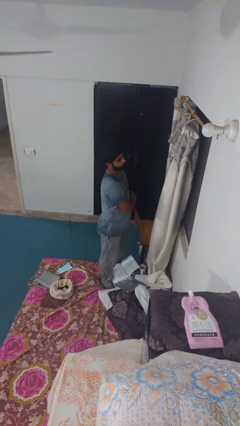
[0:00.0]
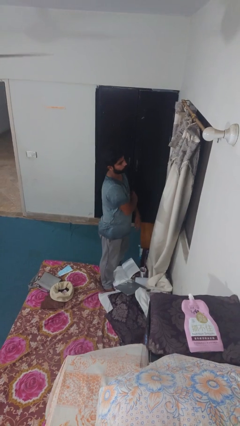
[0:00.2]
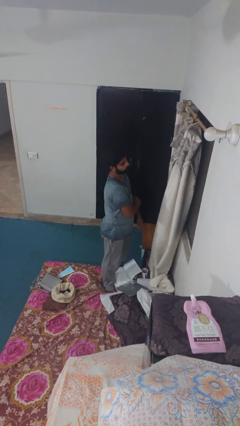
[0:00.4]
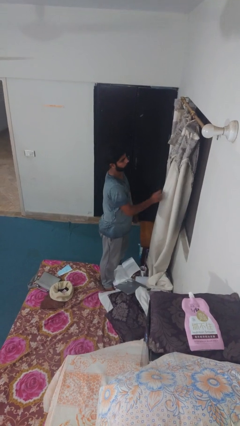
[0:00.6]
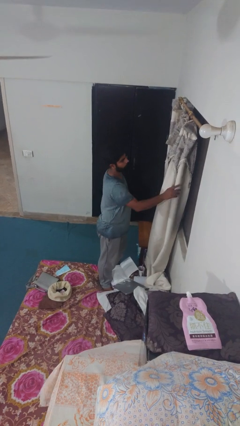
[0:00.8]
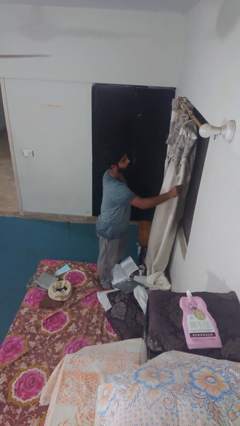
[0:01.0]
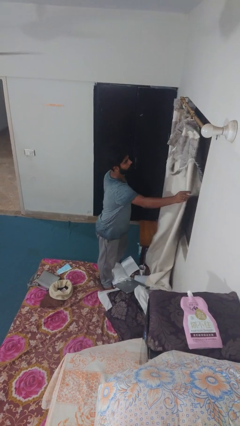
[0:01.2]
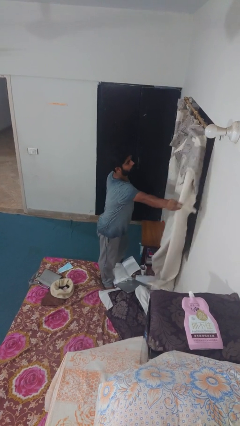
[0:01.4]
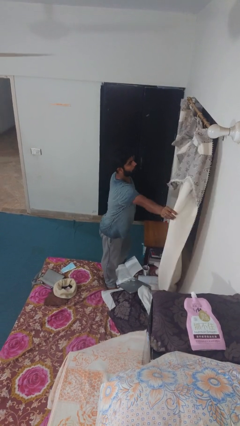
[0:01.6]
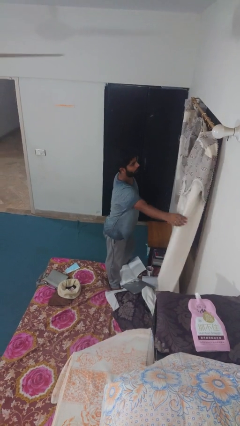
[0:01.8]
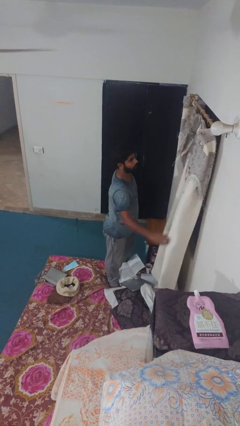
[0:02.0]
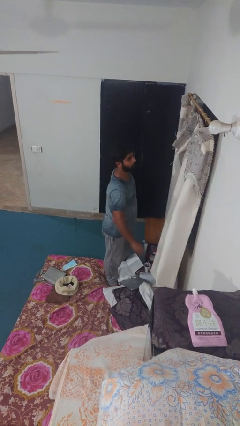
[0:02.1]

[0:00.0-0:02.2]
person closes curtains

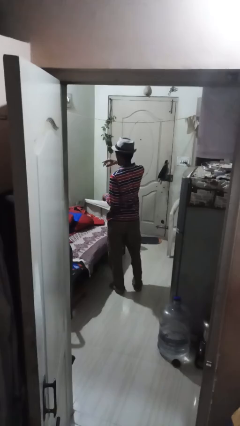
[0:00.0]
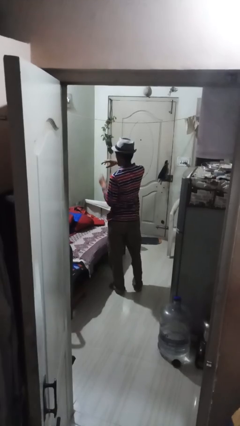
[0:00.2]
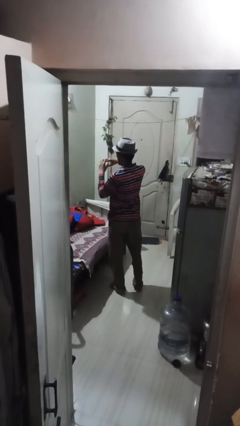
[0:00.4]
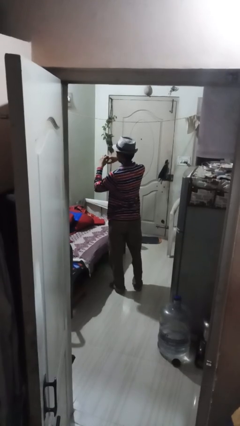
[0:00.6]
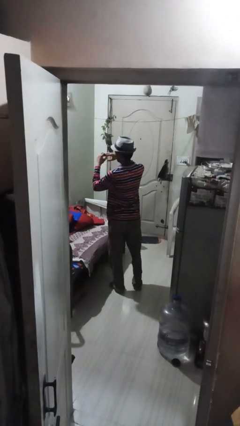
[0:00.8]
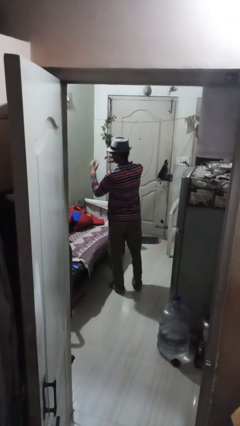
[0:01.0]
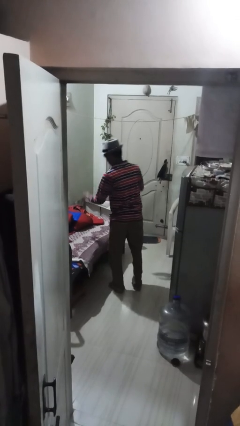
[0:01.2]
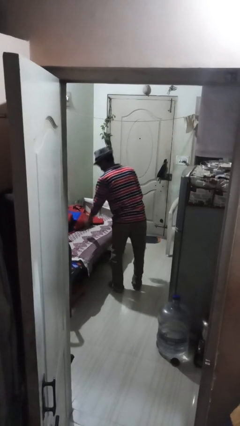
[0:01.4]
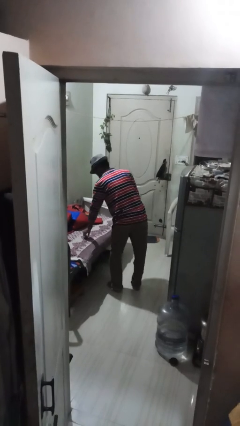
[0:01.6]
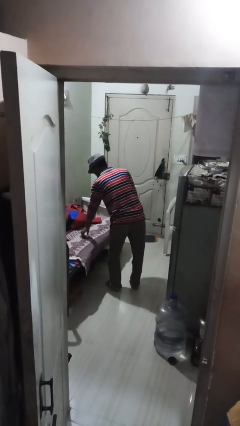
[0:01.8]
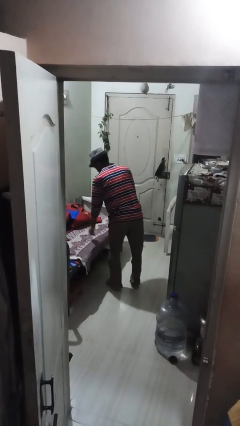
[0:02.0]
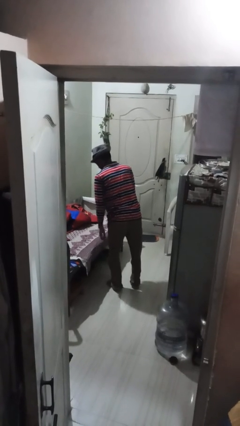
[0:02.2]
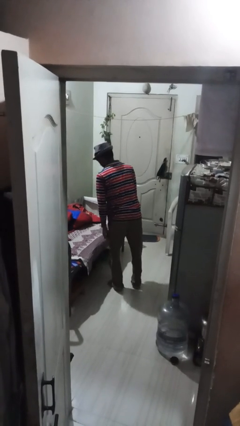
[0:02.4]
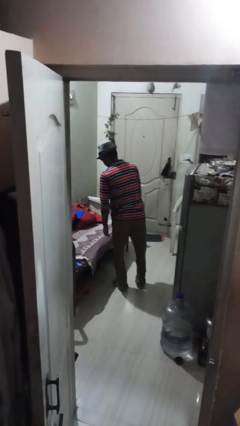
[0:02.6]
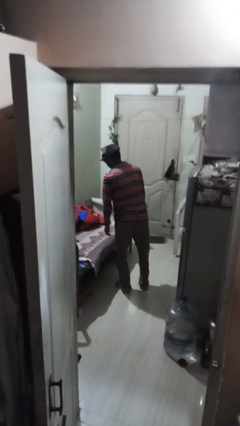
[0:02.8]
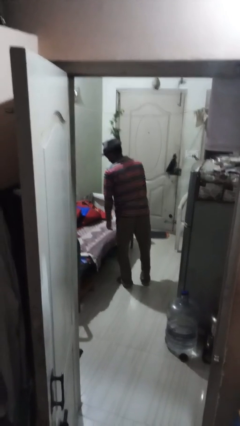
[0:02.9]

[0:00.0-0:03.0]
person takes off ring

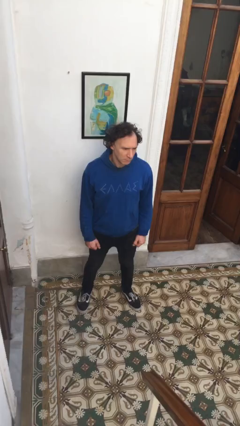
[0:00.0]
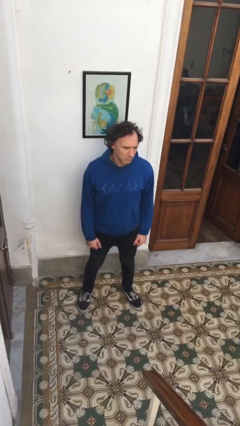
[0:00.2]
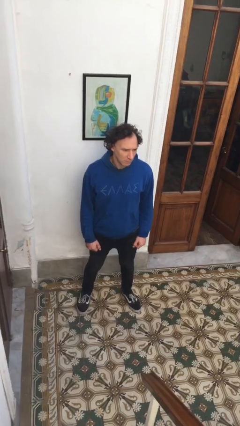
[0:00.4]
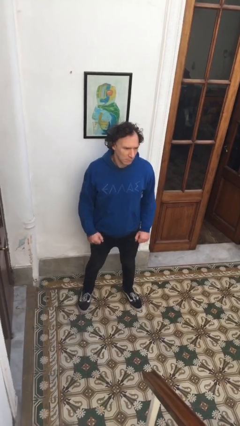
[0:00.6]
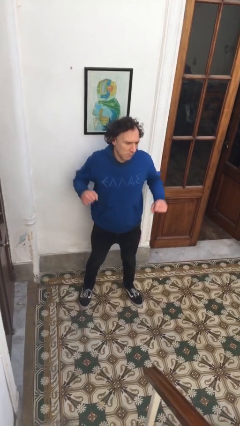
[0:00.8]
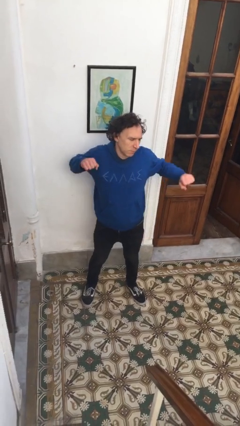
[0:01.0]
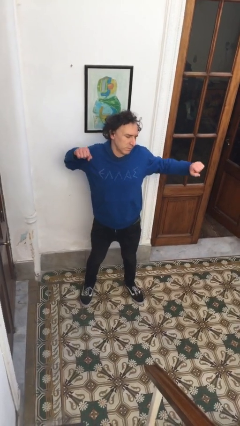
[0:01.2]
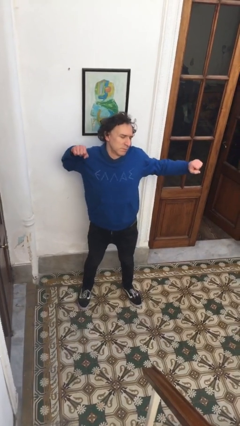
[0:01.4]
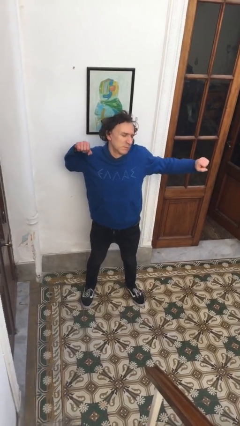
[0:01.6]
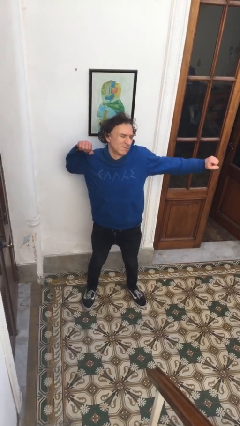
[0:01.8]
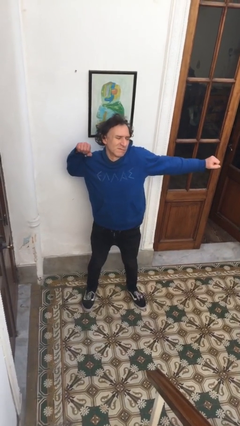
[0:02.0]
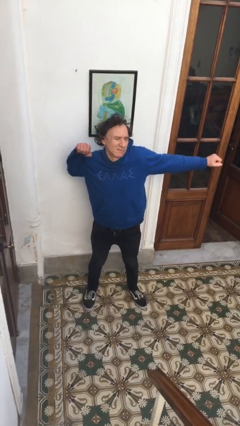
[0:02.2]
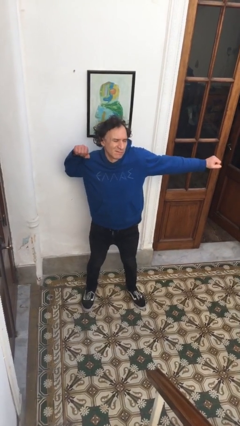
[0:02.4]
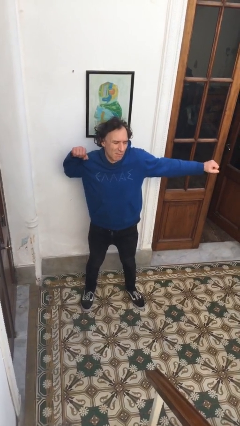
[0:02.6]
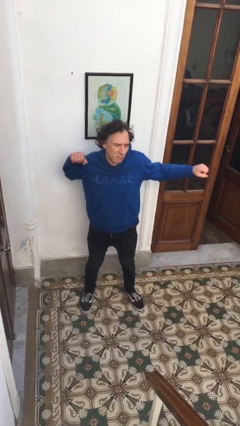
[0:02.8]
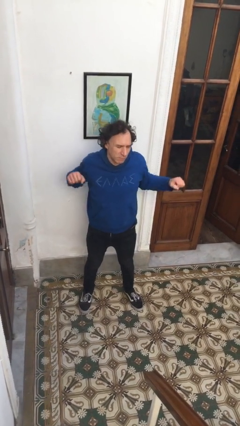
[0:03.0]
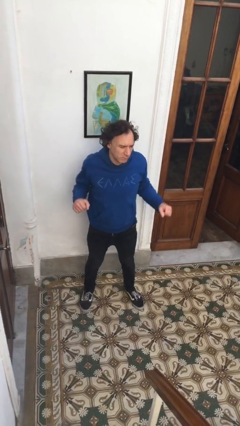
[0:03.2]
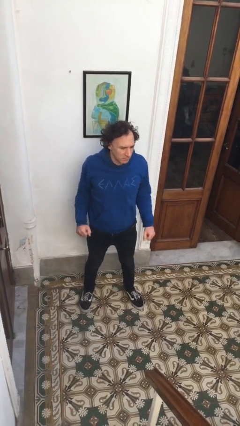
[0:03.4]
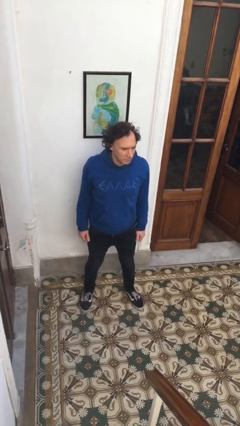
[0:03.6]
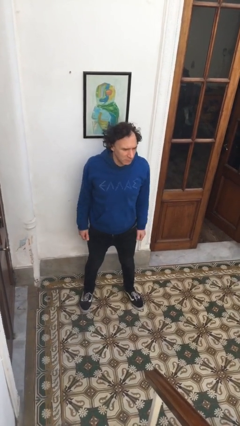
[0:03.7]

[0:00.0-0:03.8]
person stretches arms to side

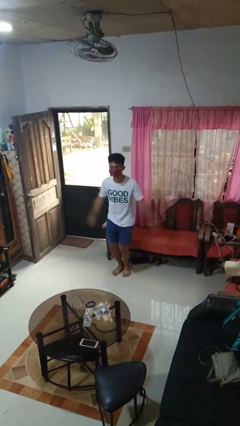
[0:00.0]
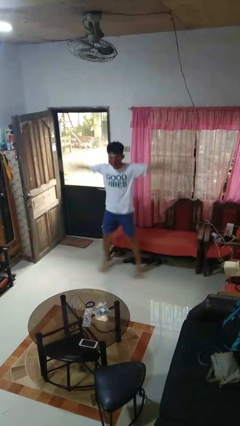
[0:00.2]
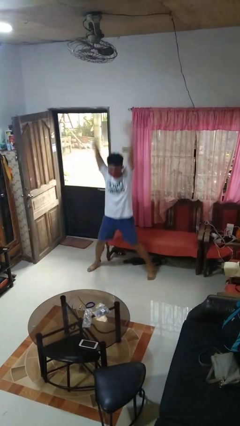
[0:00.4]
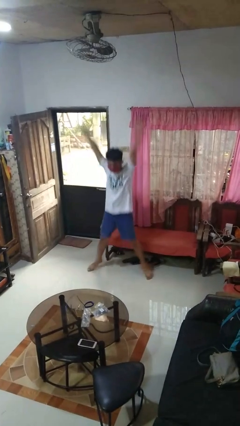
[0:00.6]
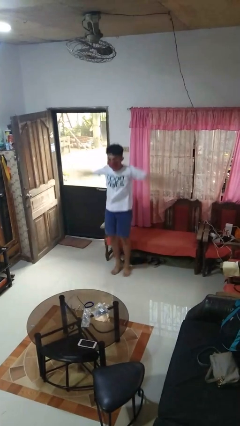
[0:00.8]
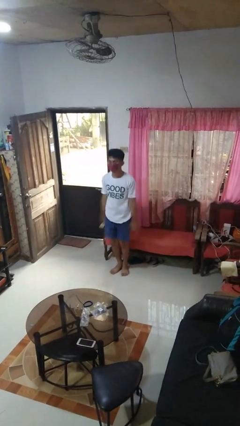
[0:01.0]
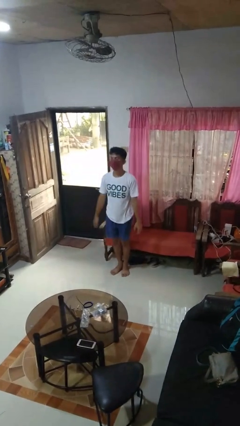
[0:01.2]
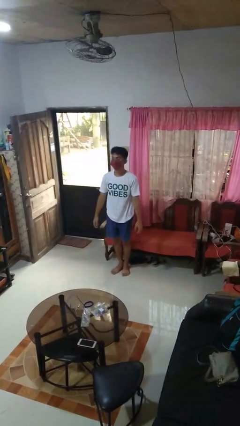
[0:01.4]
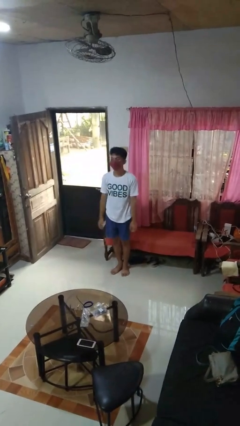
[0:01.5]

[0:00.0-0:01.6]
person exercises with jumping jacks

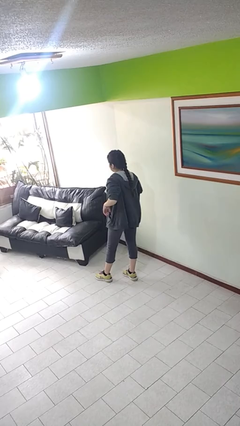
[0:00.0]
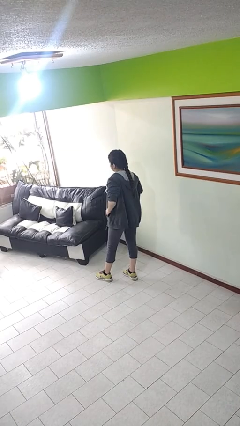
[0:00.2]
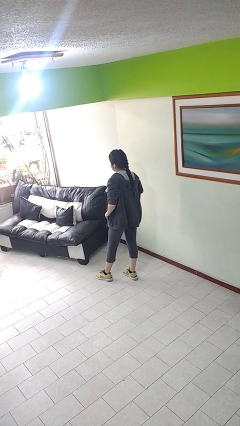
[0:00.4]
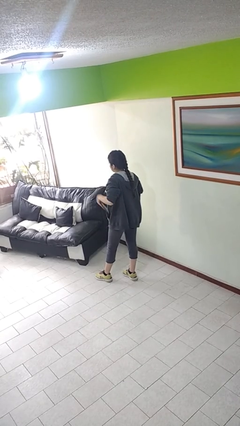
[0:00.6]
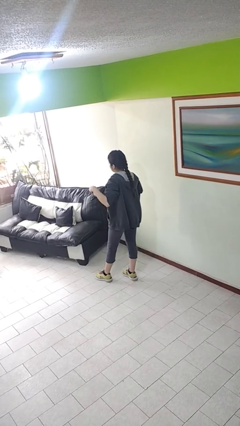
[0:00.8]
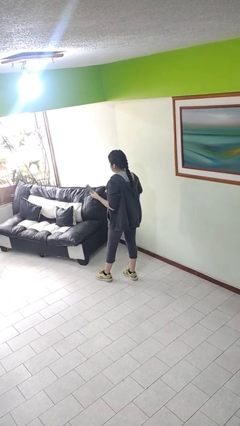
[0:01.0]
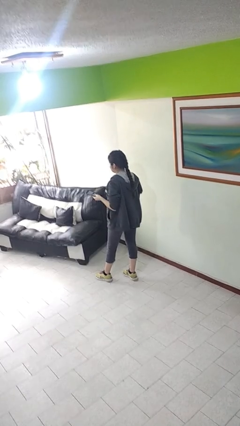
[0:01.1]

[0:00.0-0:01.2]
person takes phone from pocket

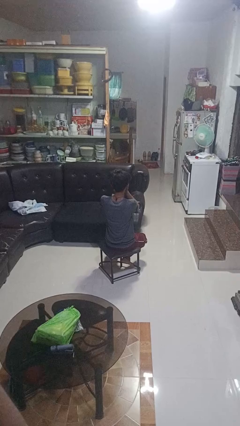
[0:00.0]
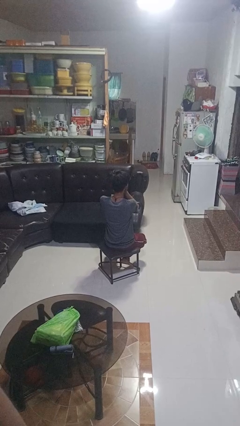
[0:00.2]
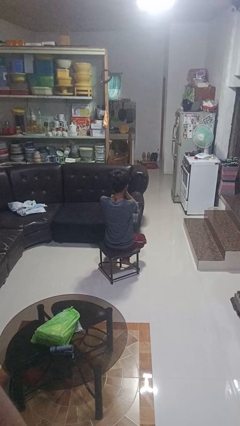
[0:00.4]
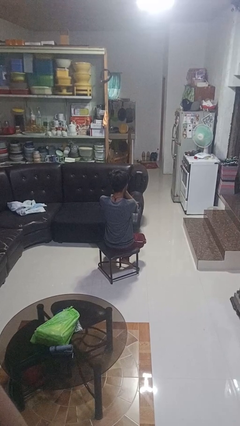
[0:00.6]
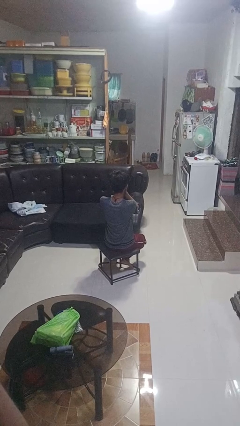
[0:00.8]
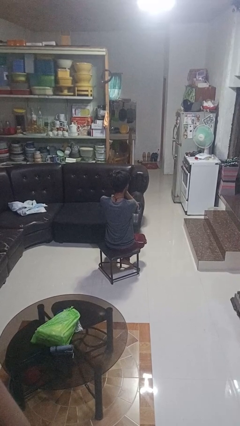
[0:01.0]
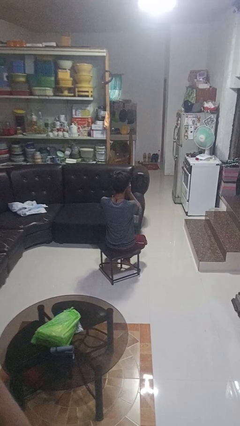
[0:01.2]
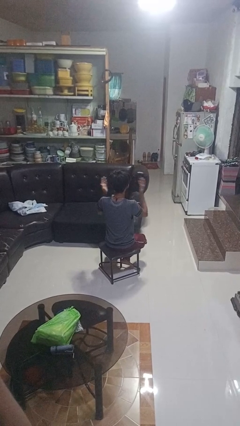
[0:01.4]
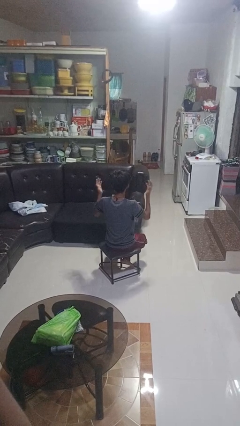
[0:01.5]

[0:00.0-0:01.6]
person covers face with hands

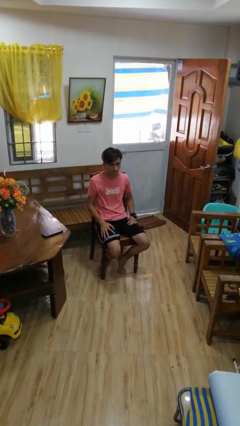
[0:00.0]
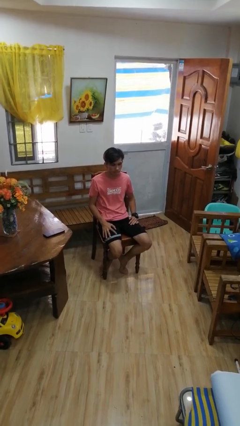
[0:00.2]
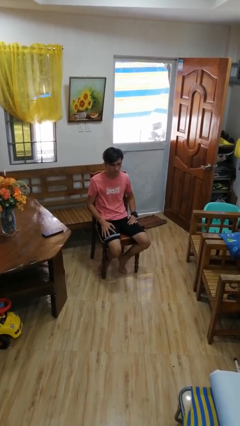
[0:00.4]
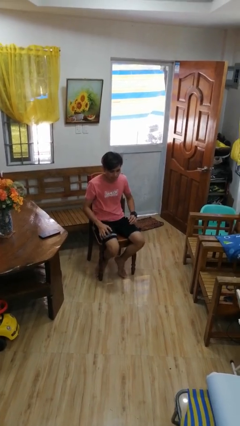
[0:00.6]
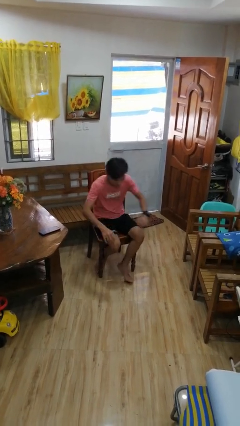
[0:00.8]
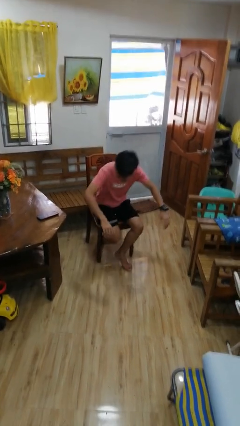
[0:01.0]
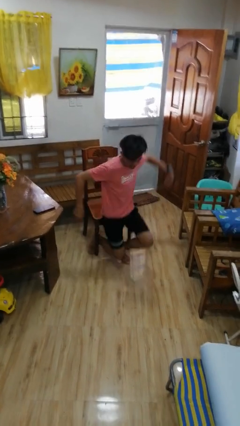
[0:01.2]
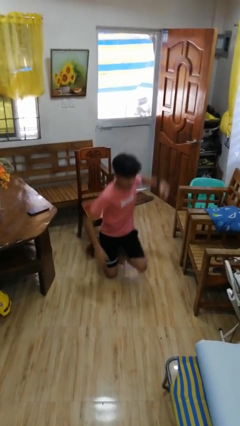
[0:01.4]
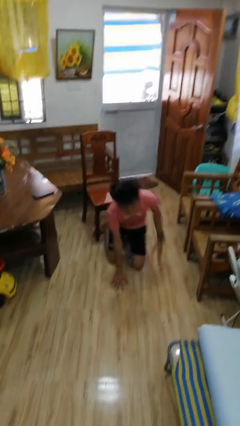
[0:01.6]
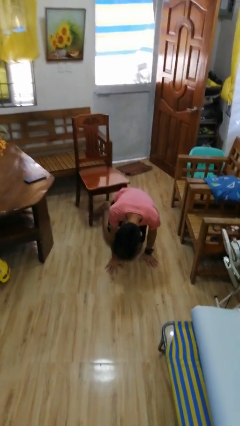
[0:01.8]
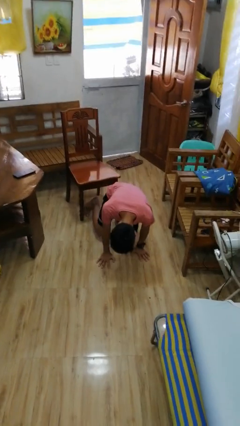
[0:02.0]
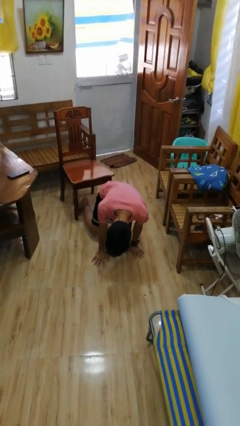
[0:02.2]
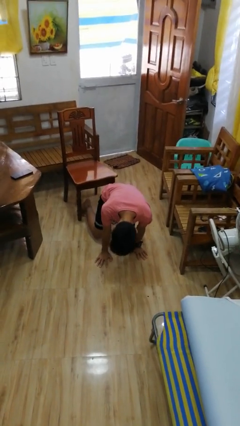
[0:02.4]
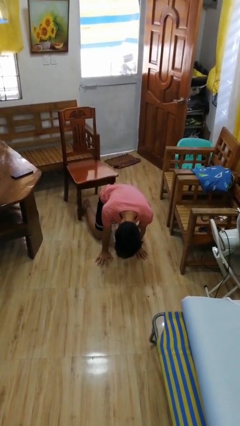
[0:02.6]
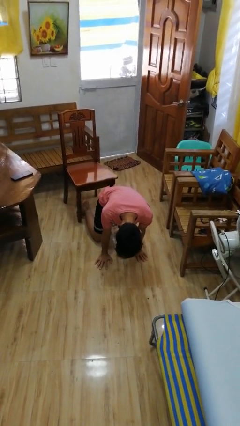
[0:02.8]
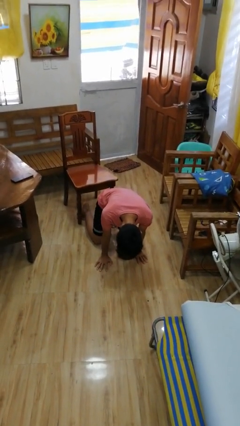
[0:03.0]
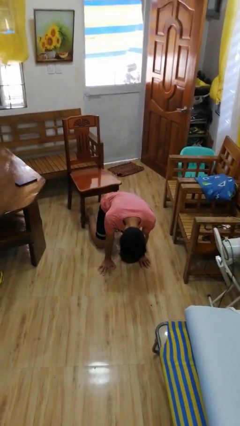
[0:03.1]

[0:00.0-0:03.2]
person falls from chair

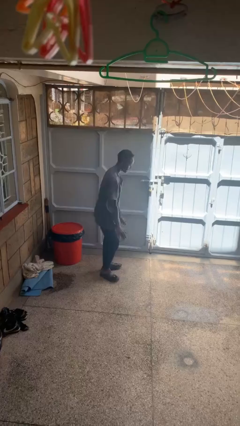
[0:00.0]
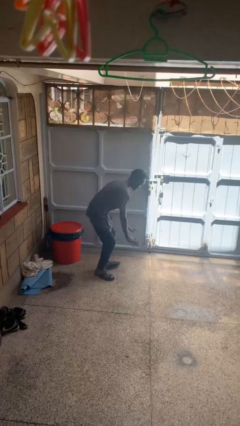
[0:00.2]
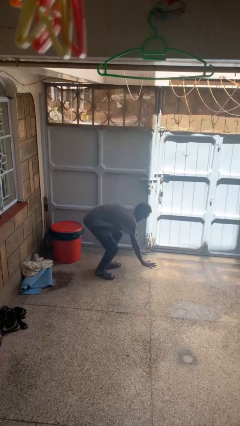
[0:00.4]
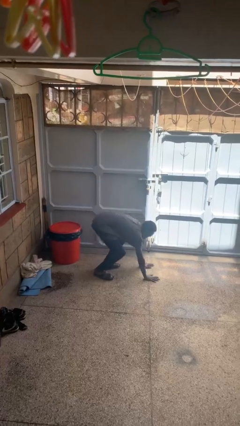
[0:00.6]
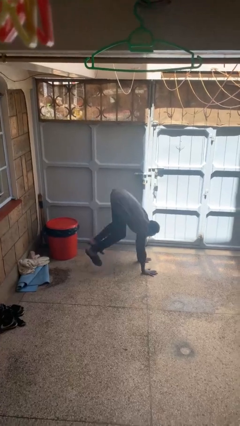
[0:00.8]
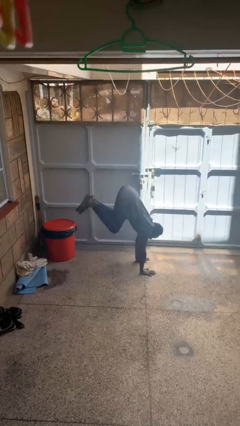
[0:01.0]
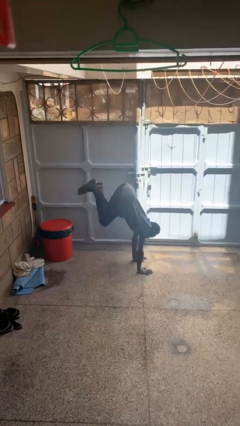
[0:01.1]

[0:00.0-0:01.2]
person handstand
